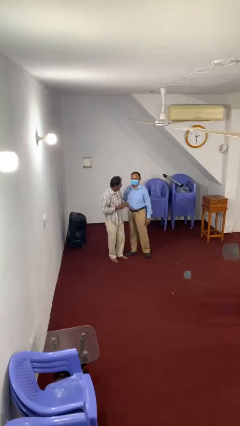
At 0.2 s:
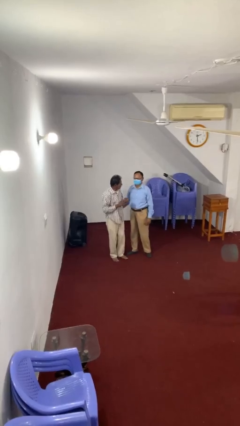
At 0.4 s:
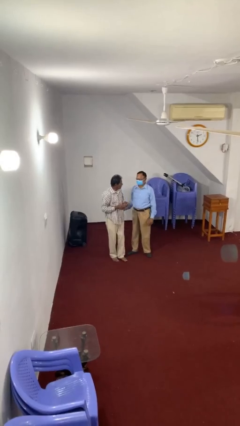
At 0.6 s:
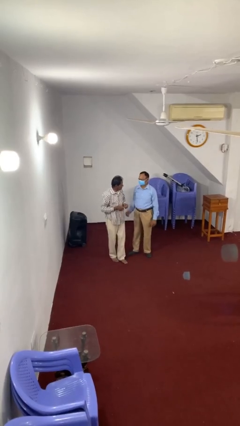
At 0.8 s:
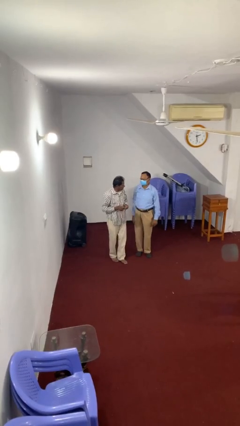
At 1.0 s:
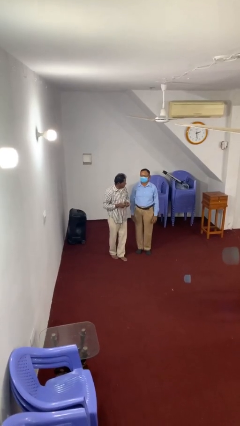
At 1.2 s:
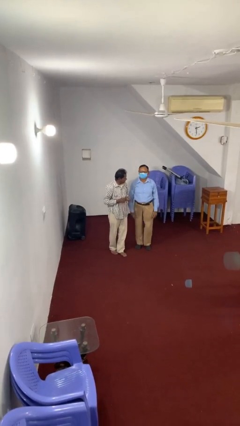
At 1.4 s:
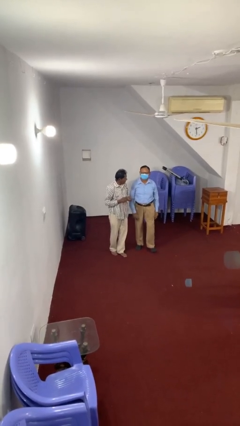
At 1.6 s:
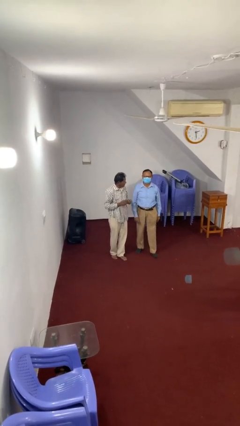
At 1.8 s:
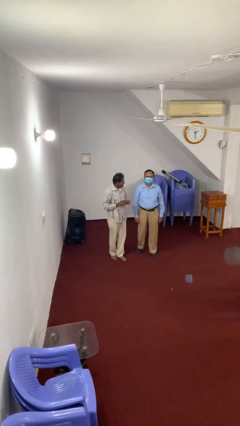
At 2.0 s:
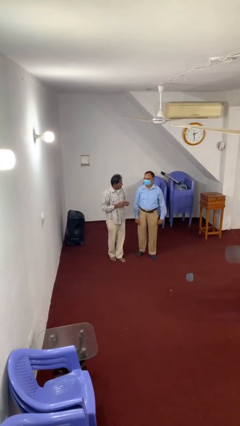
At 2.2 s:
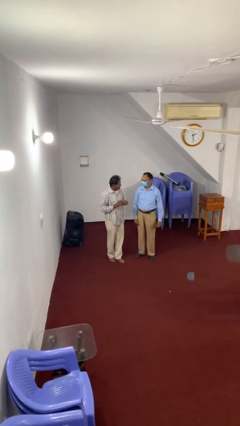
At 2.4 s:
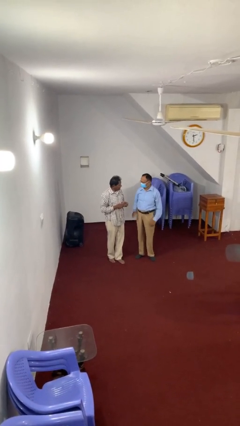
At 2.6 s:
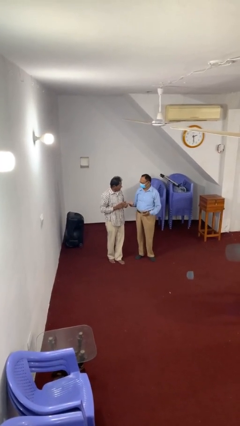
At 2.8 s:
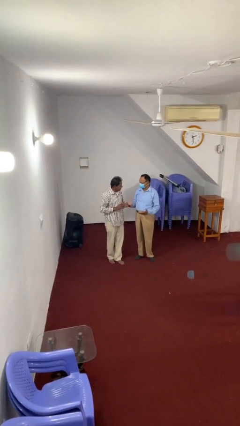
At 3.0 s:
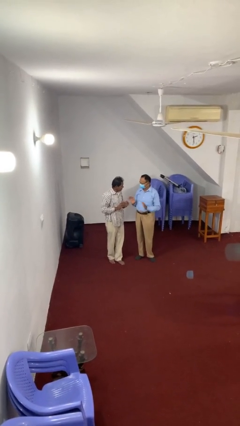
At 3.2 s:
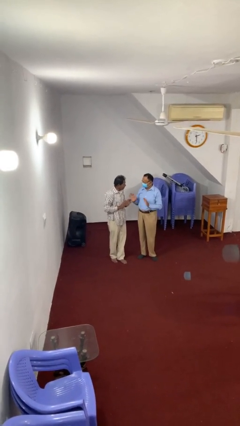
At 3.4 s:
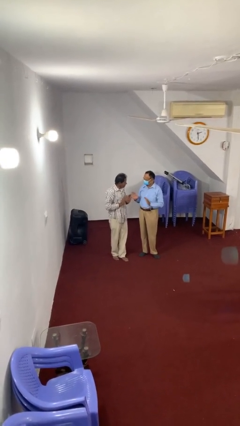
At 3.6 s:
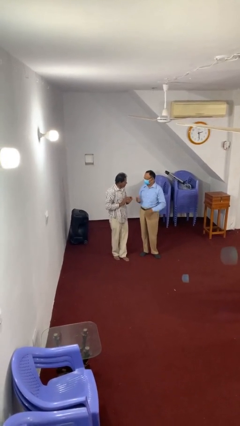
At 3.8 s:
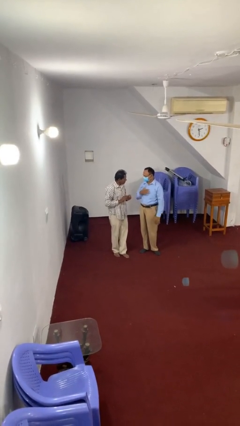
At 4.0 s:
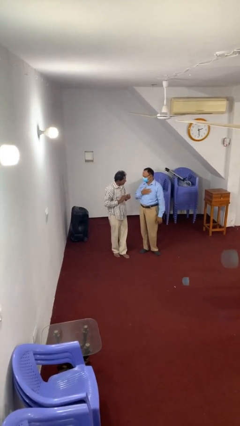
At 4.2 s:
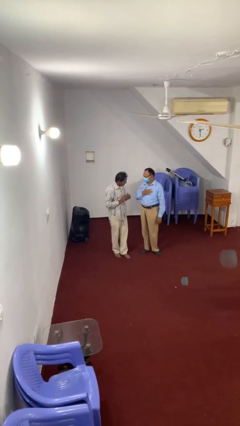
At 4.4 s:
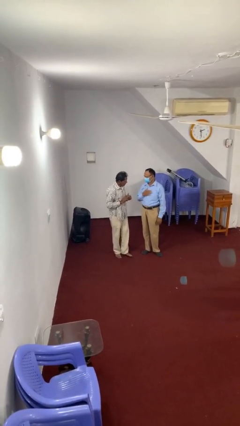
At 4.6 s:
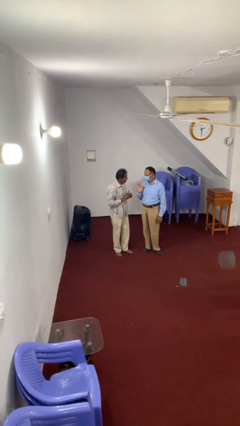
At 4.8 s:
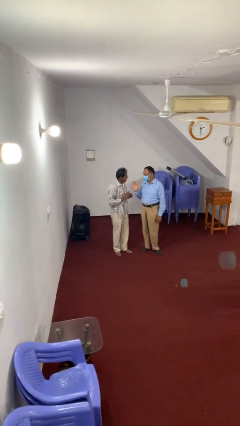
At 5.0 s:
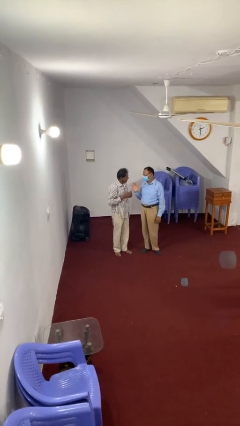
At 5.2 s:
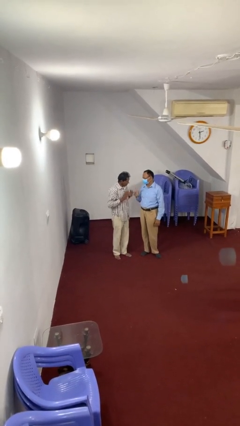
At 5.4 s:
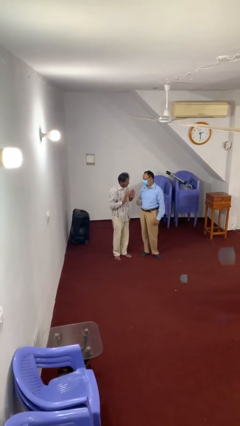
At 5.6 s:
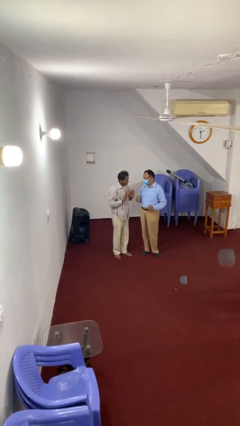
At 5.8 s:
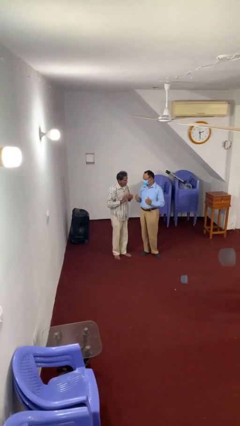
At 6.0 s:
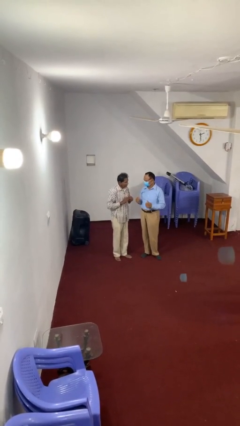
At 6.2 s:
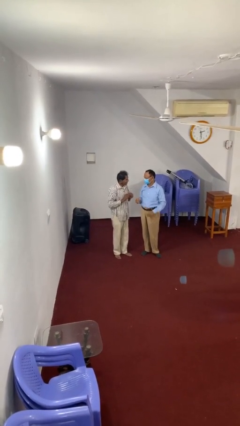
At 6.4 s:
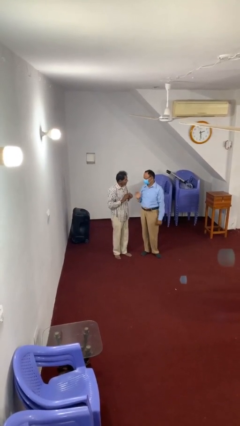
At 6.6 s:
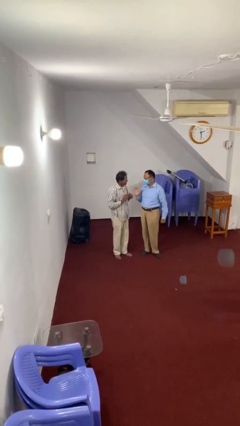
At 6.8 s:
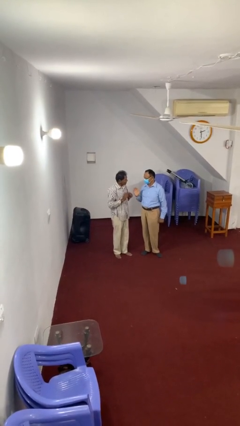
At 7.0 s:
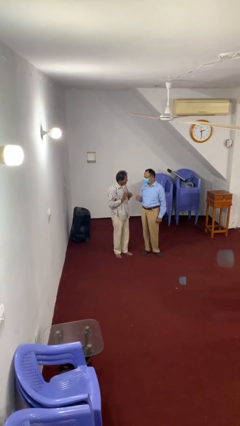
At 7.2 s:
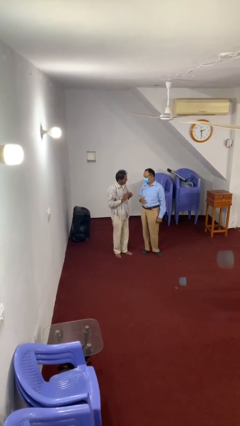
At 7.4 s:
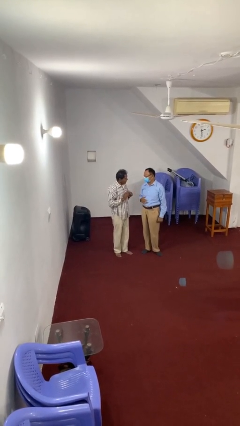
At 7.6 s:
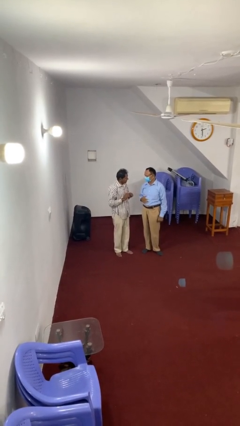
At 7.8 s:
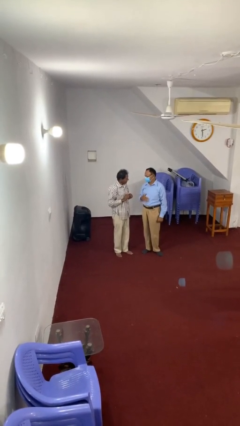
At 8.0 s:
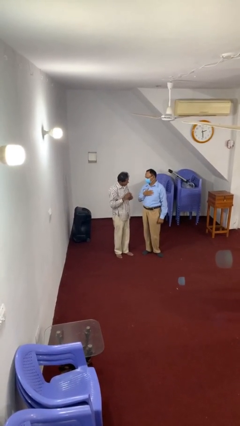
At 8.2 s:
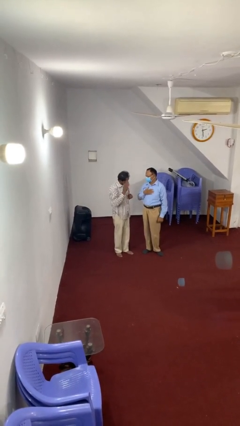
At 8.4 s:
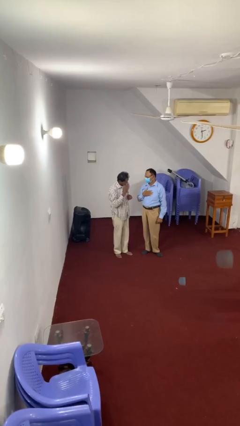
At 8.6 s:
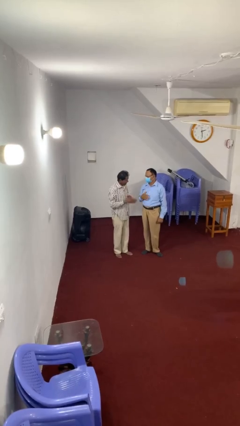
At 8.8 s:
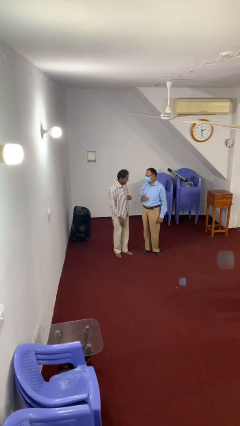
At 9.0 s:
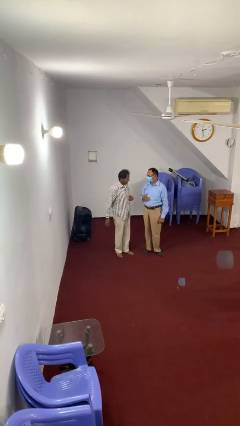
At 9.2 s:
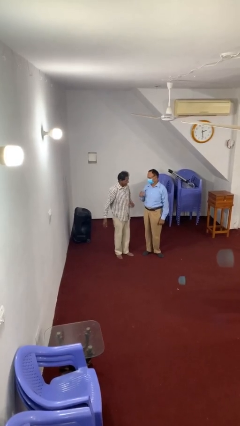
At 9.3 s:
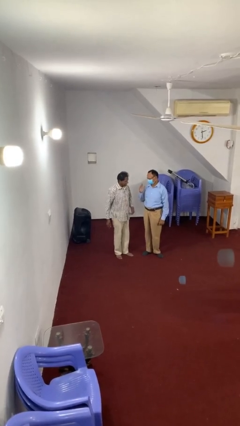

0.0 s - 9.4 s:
person talks to person

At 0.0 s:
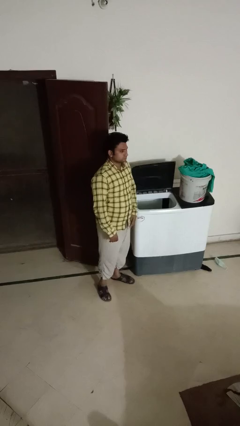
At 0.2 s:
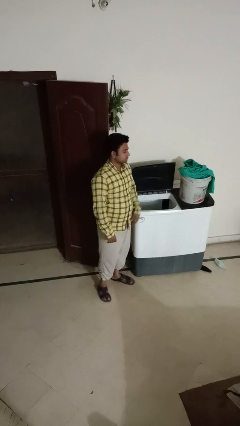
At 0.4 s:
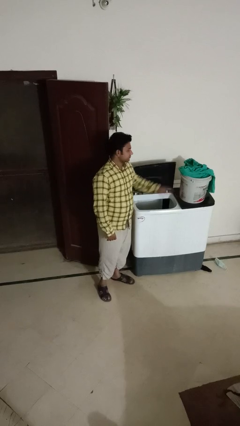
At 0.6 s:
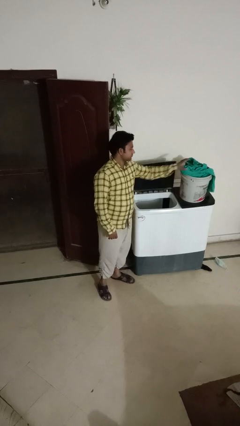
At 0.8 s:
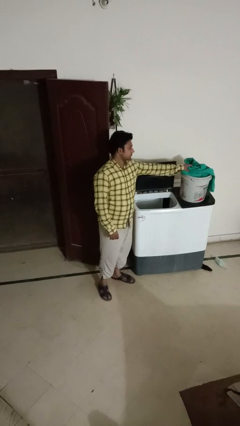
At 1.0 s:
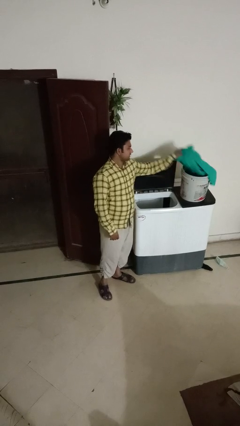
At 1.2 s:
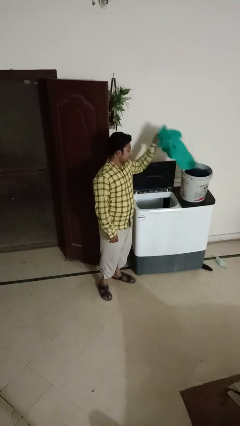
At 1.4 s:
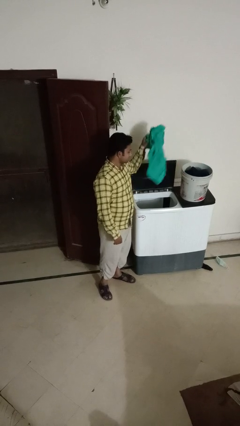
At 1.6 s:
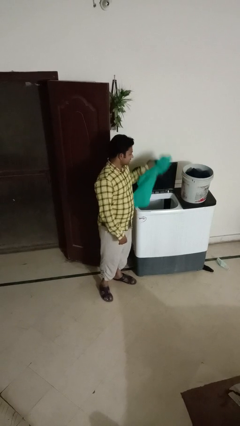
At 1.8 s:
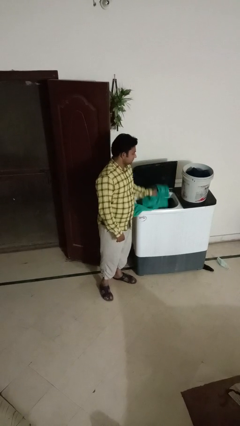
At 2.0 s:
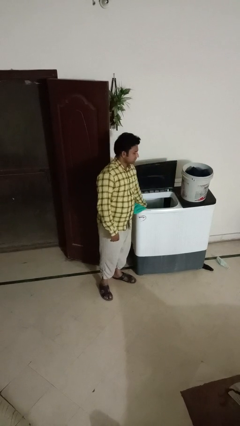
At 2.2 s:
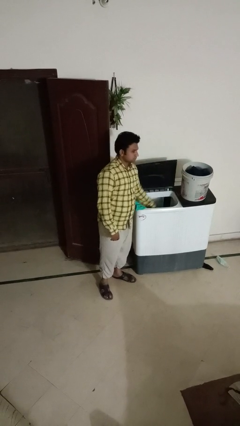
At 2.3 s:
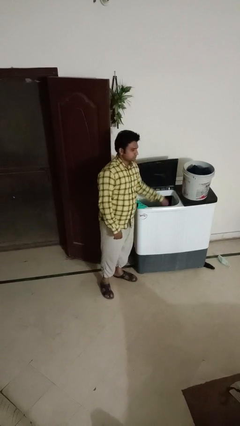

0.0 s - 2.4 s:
person loads clotheswasher

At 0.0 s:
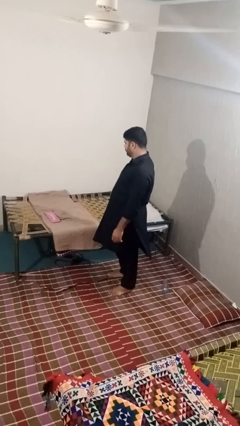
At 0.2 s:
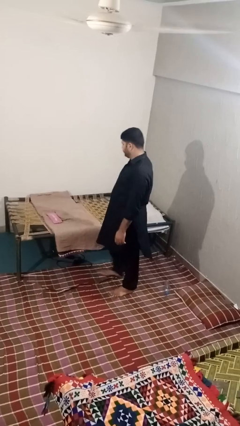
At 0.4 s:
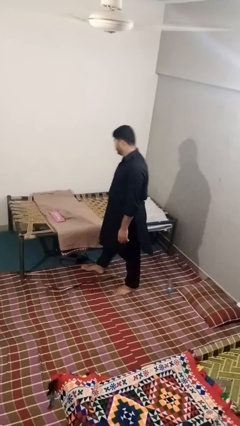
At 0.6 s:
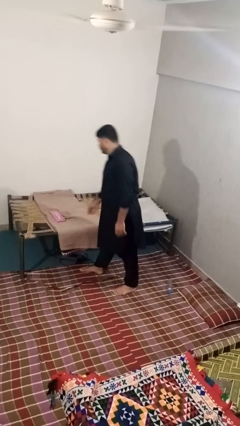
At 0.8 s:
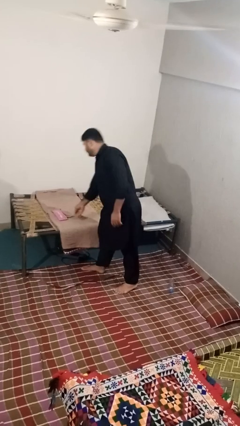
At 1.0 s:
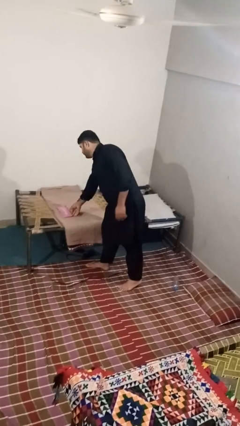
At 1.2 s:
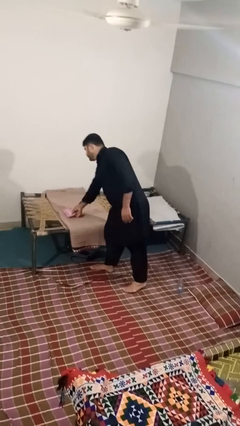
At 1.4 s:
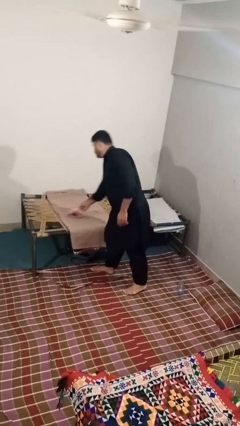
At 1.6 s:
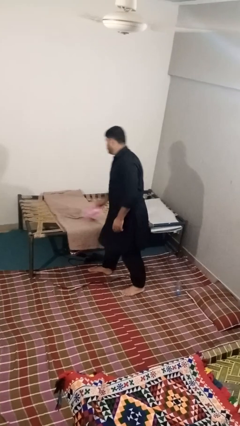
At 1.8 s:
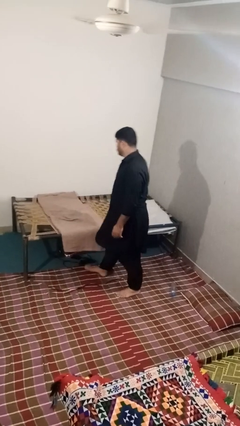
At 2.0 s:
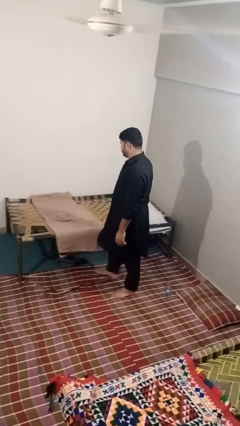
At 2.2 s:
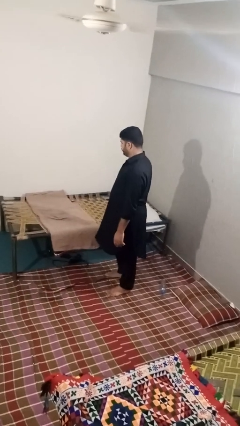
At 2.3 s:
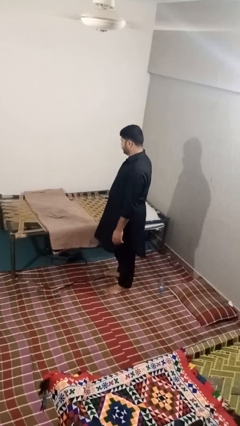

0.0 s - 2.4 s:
person picks up object from bed

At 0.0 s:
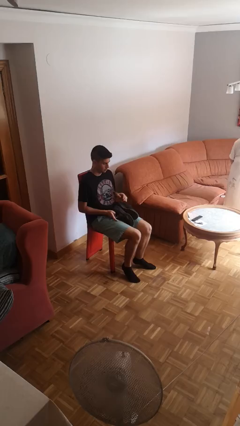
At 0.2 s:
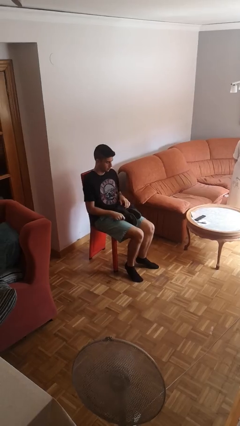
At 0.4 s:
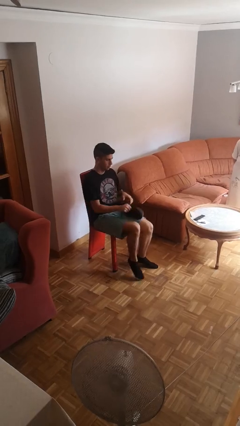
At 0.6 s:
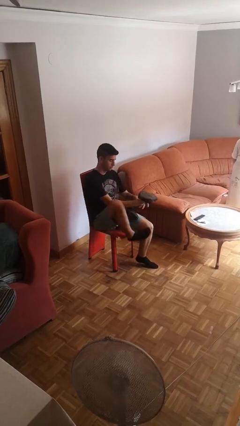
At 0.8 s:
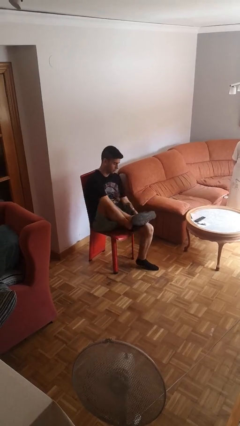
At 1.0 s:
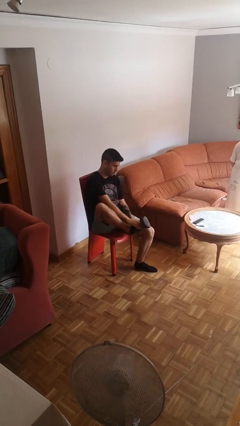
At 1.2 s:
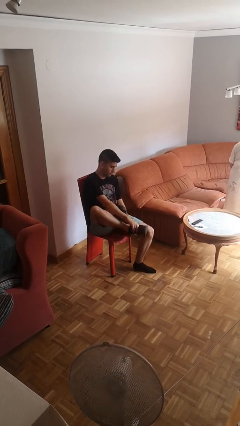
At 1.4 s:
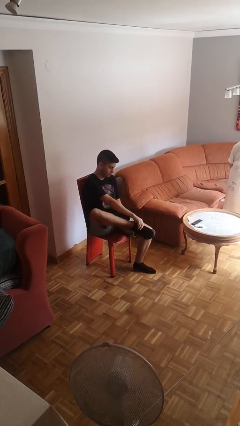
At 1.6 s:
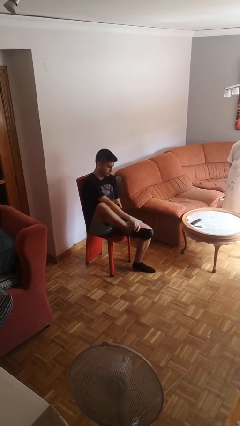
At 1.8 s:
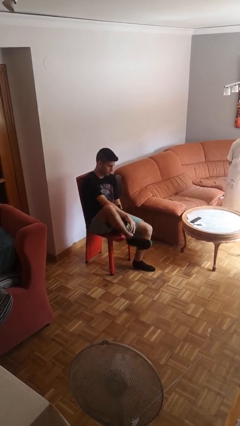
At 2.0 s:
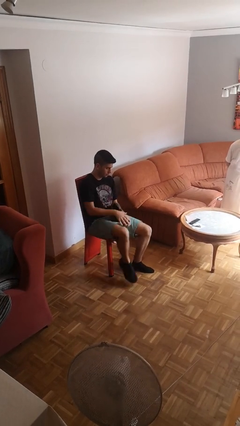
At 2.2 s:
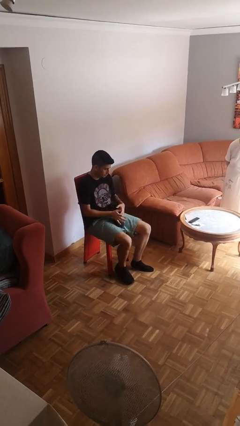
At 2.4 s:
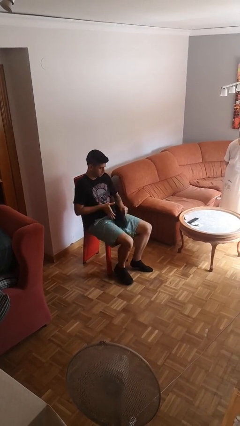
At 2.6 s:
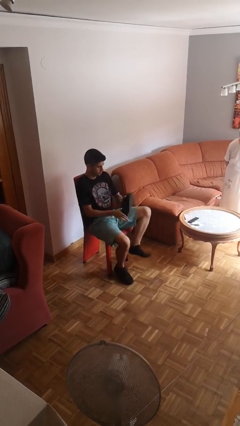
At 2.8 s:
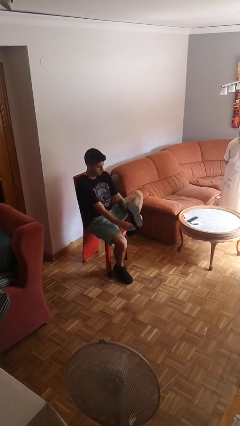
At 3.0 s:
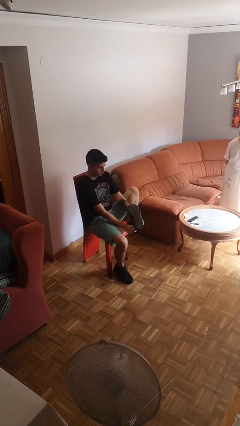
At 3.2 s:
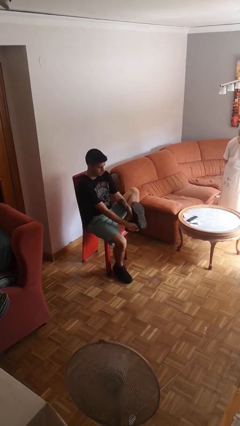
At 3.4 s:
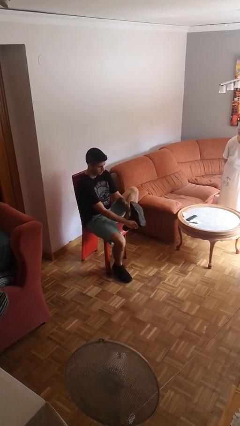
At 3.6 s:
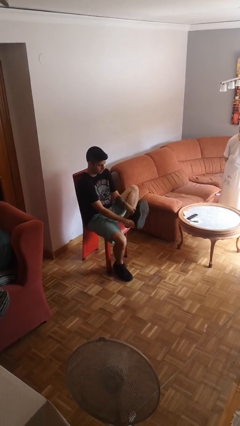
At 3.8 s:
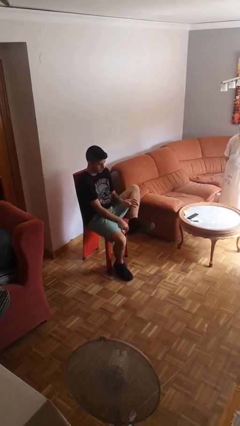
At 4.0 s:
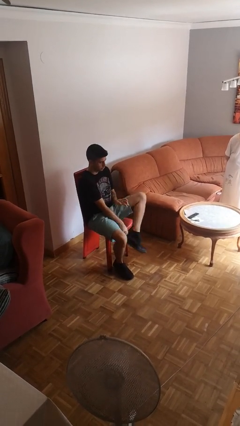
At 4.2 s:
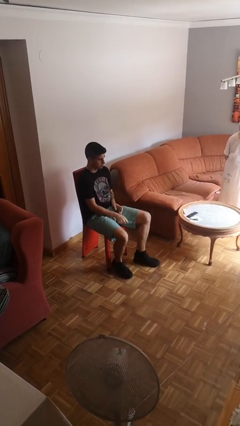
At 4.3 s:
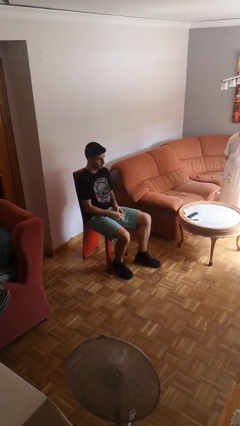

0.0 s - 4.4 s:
person puts on shoes
